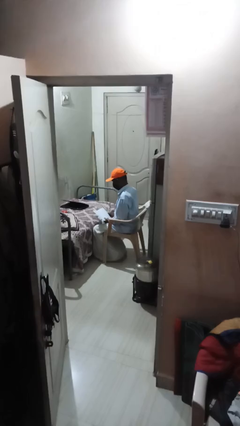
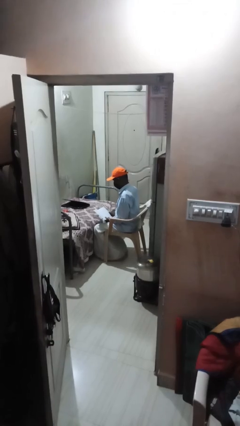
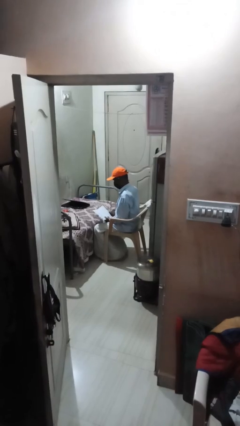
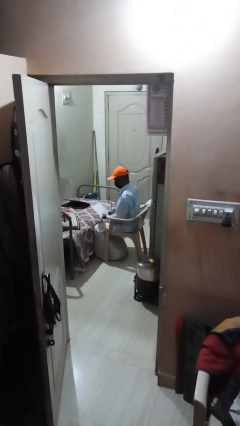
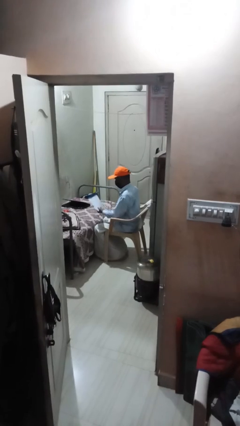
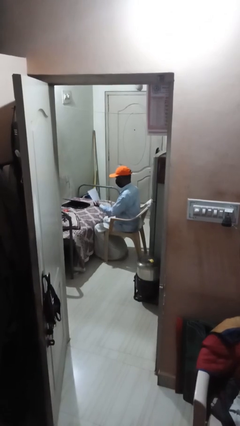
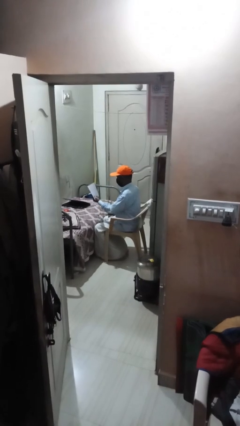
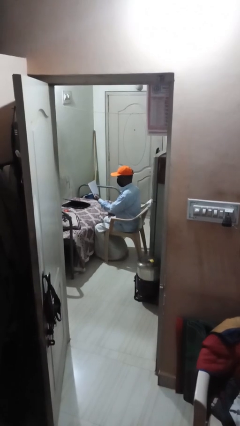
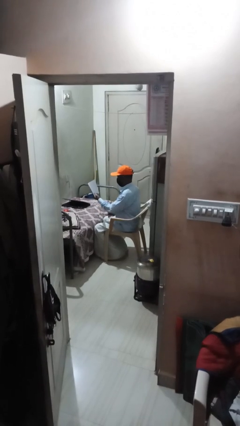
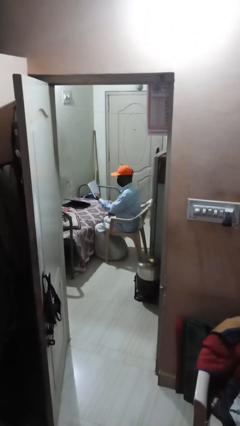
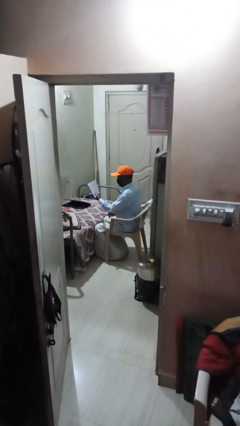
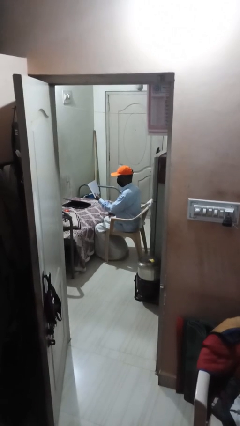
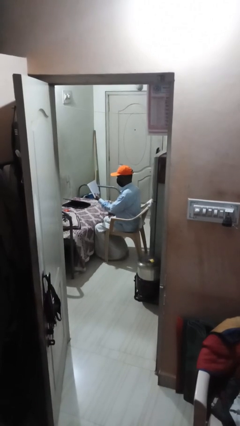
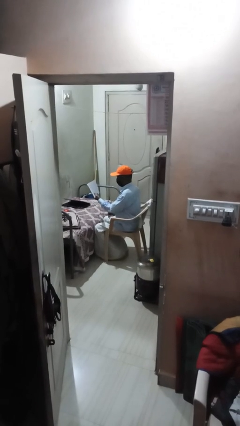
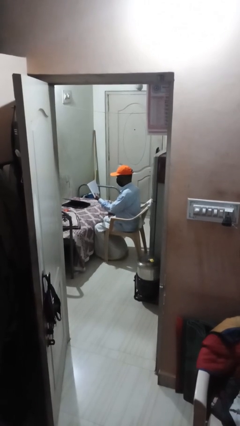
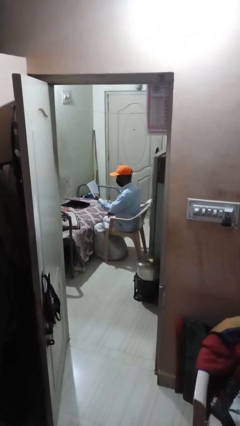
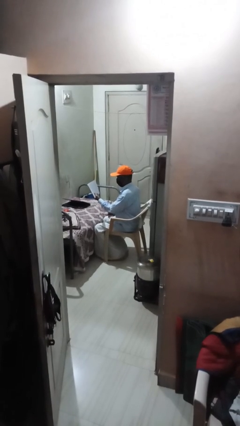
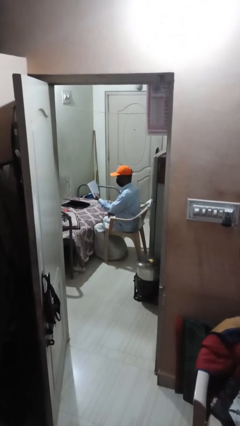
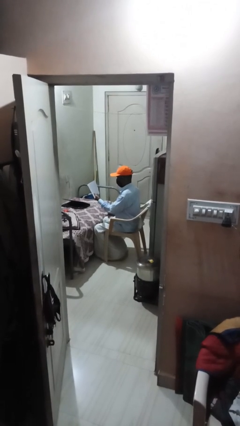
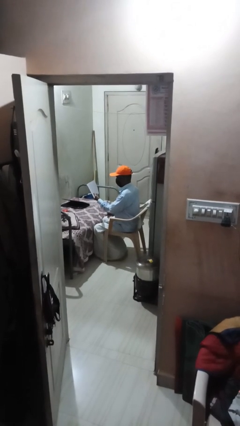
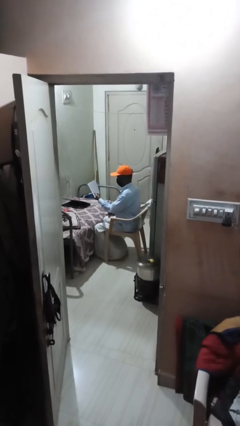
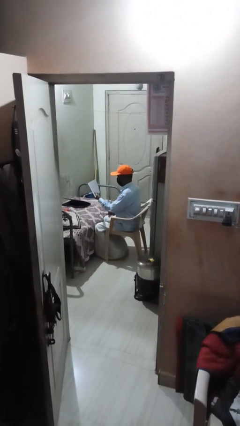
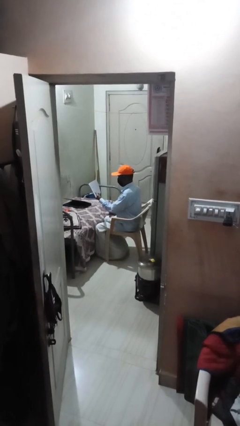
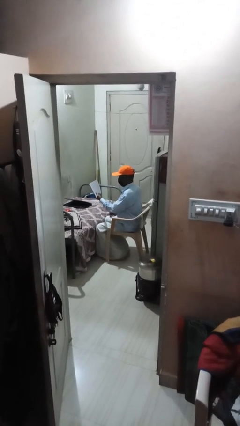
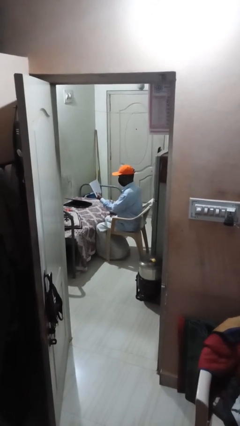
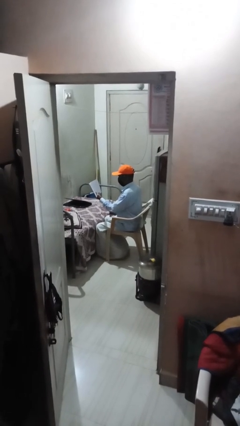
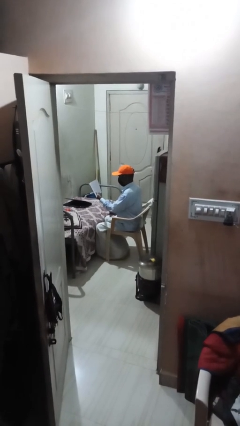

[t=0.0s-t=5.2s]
person reads document

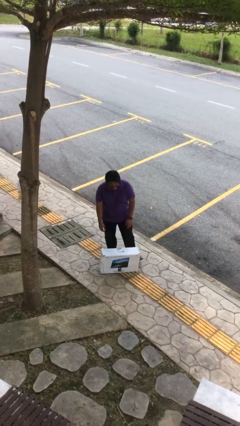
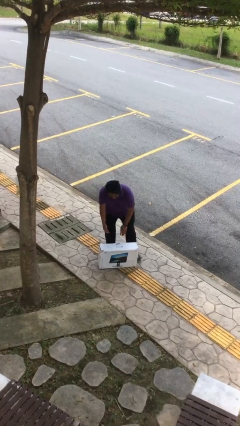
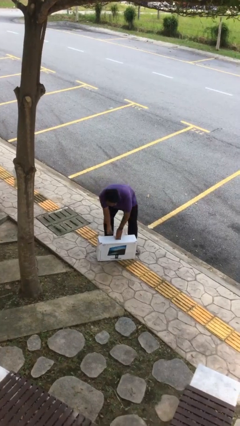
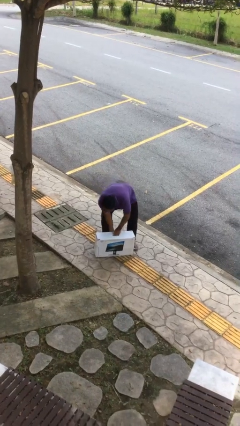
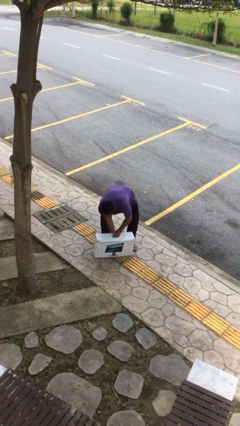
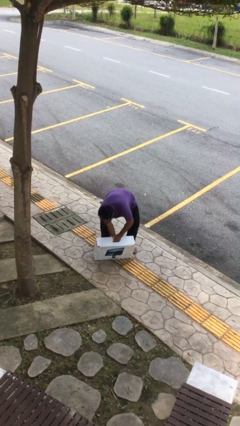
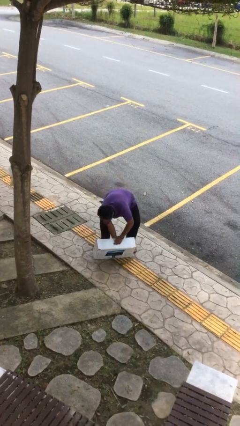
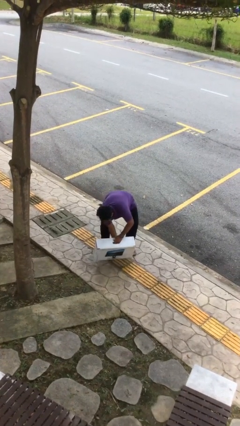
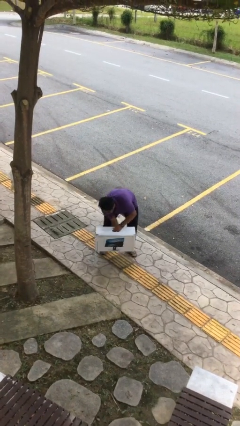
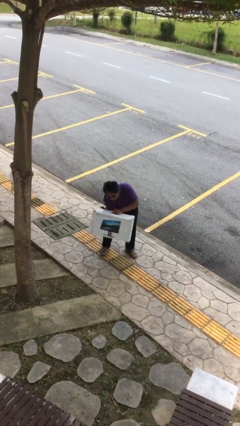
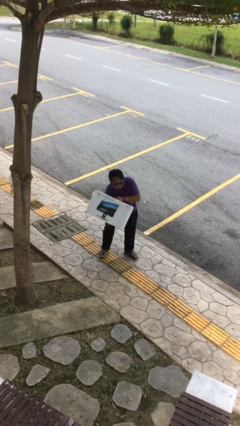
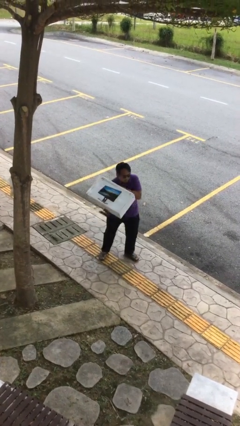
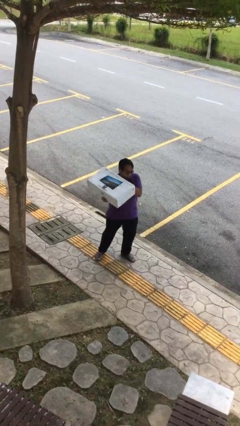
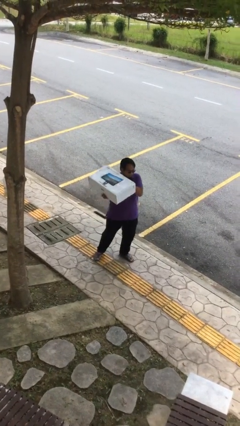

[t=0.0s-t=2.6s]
person picks up object from floor

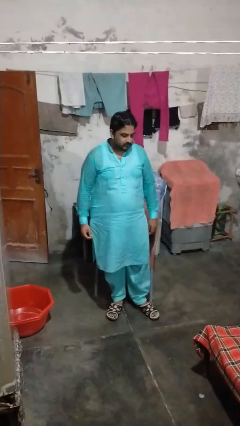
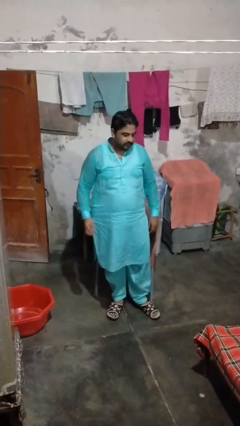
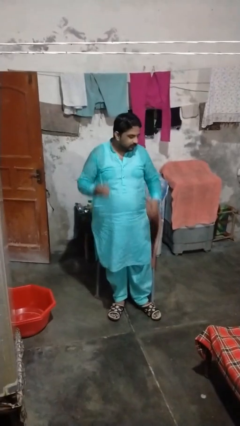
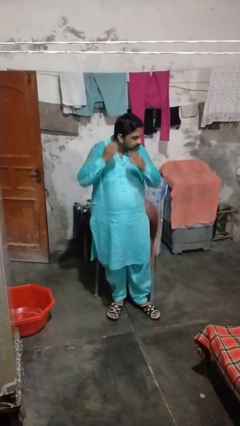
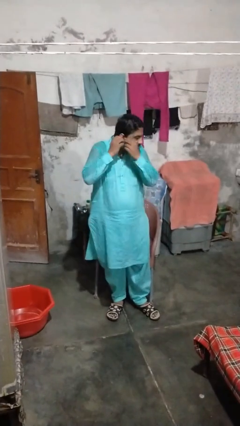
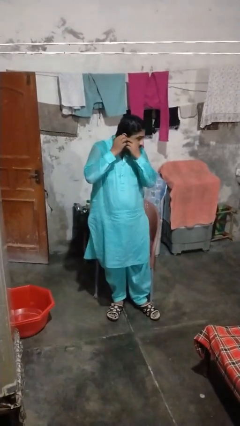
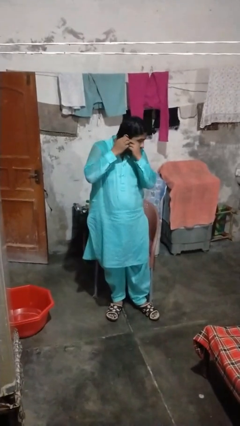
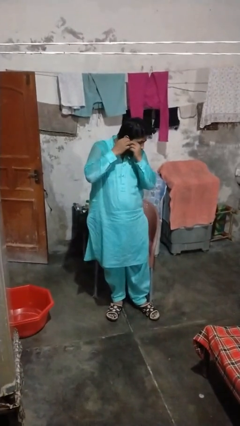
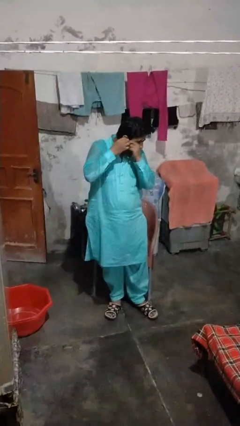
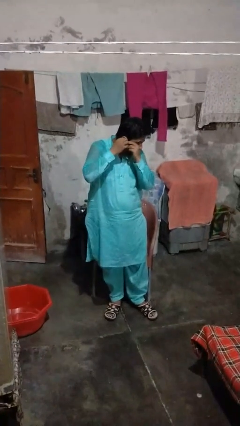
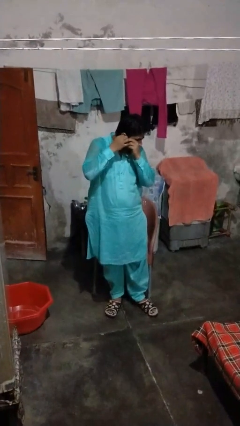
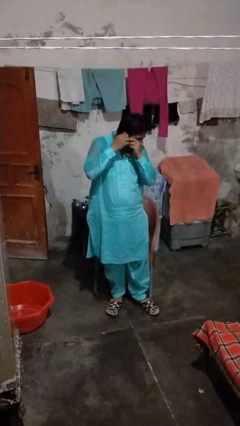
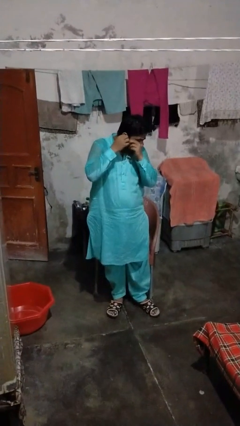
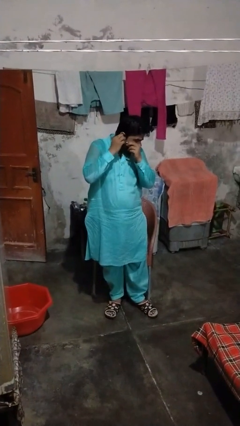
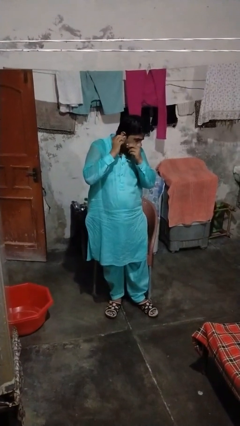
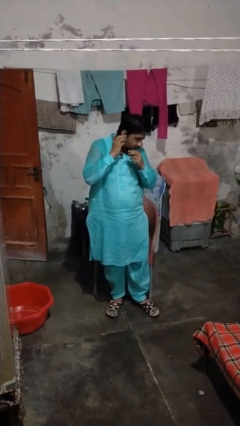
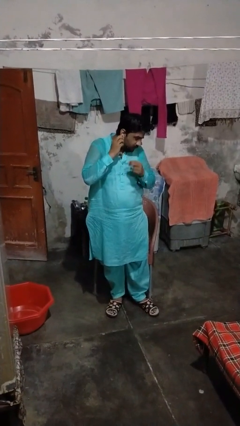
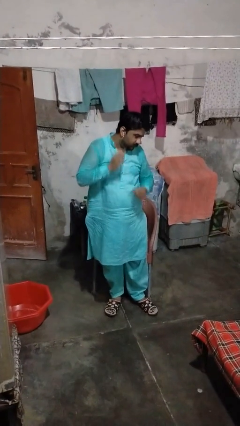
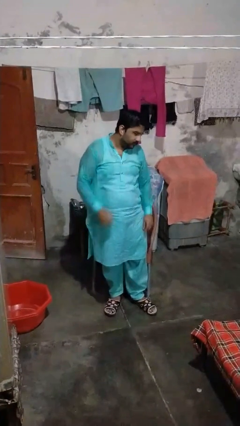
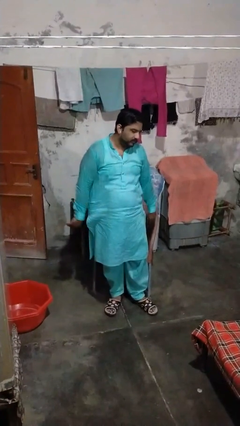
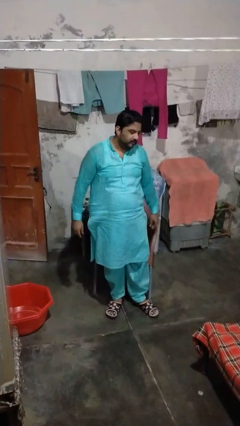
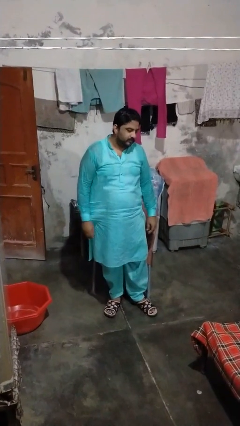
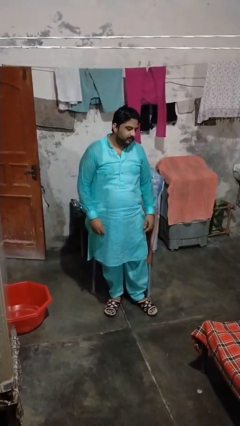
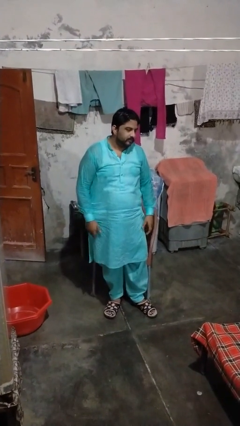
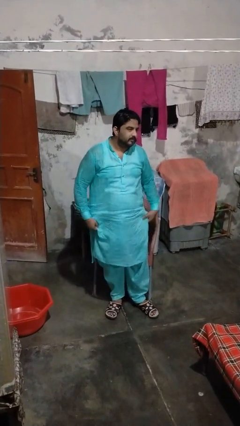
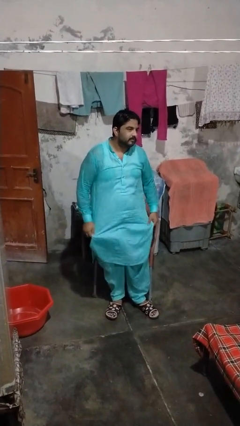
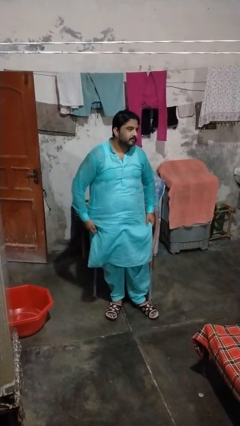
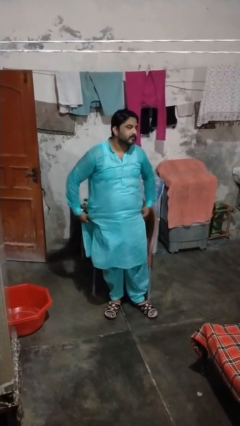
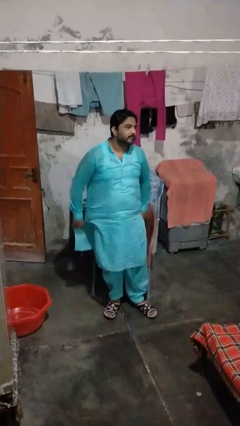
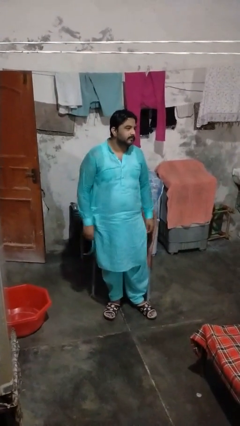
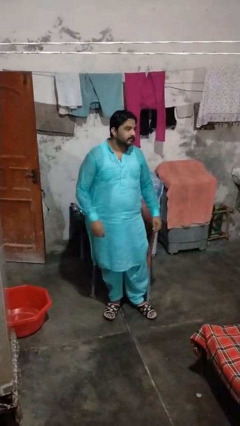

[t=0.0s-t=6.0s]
person puts on earrings

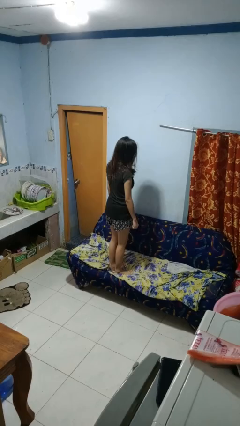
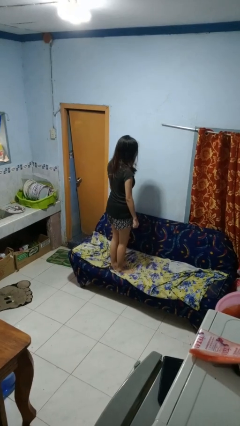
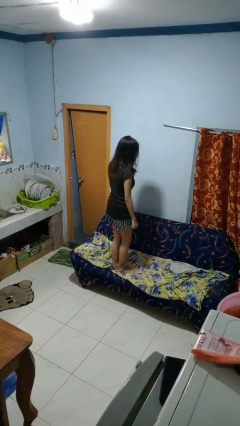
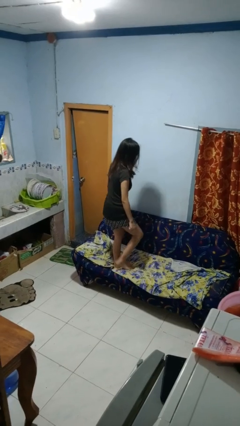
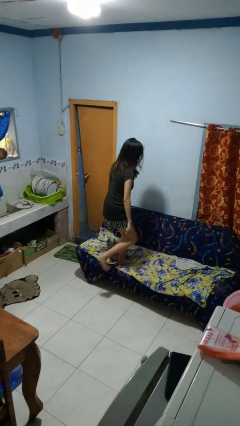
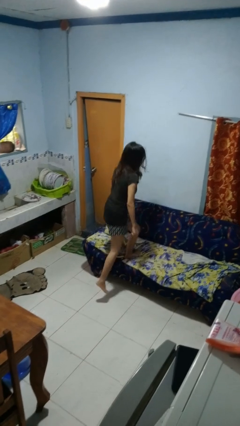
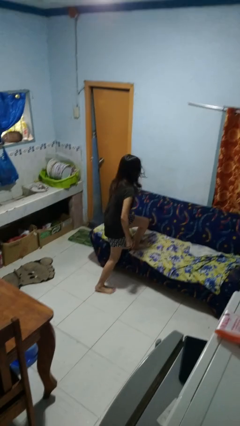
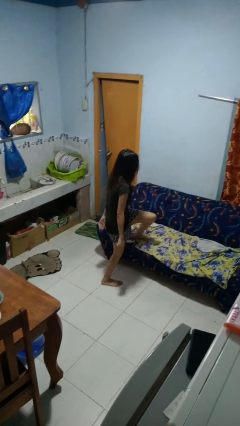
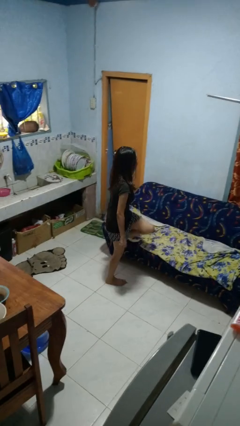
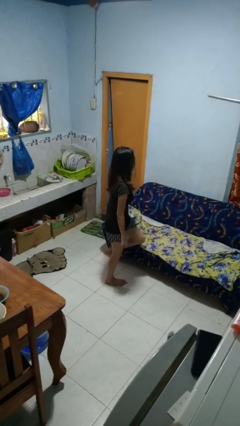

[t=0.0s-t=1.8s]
person climbs off couch

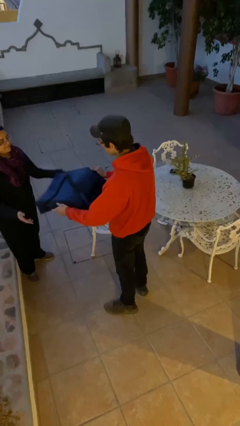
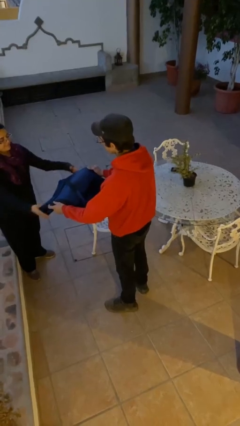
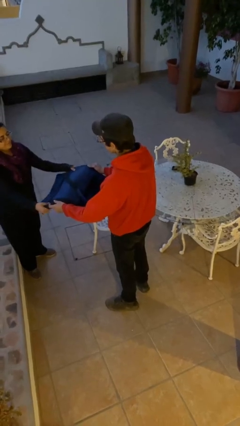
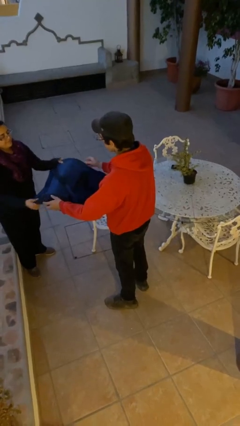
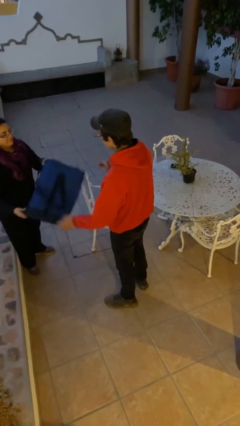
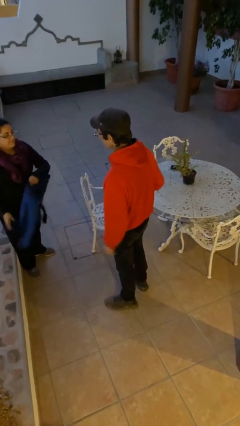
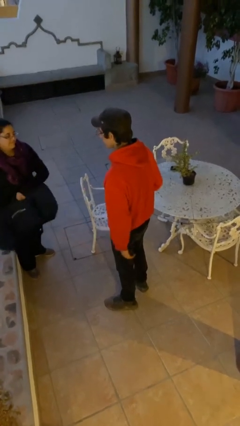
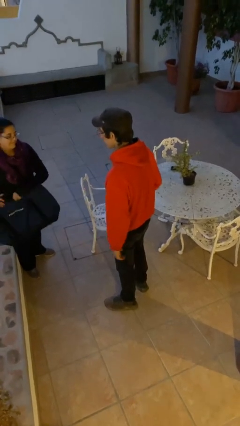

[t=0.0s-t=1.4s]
person transfers object to person

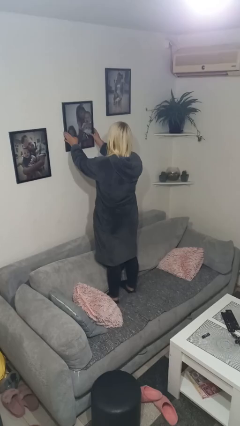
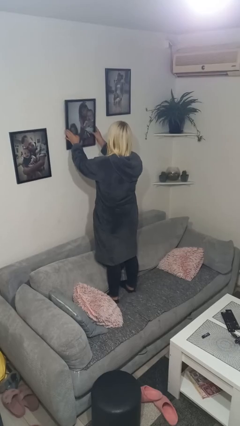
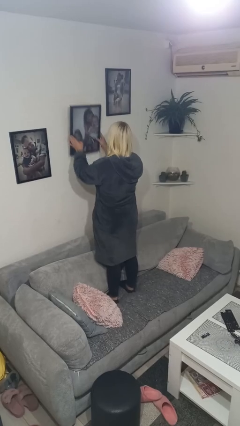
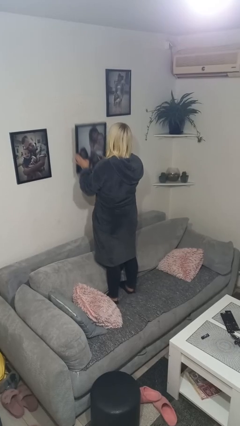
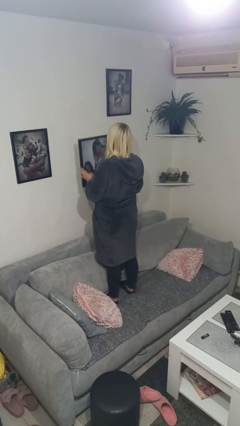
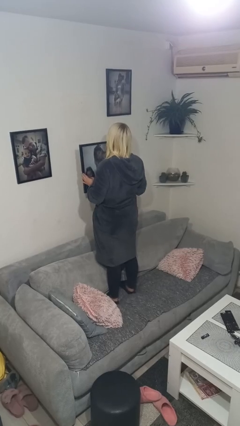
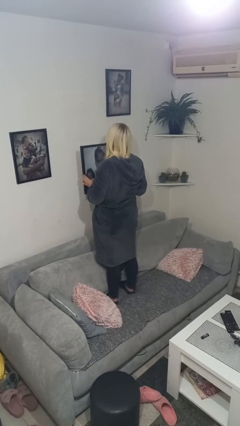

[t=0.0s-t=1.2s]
person takes down picture frame
